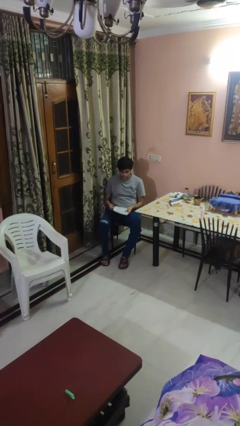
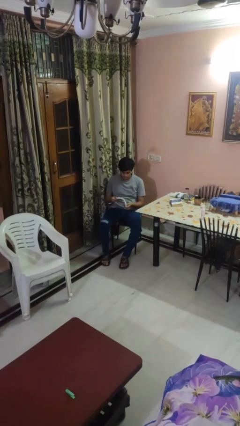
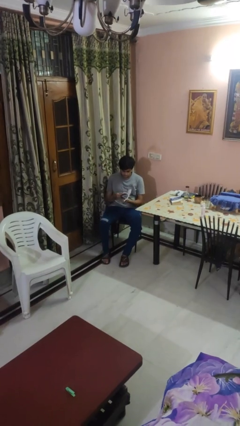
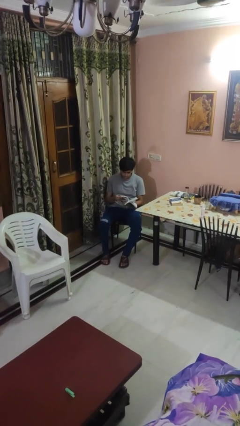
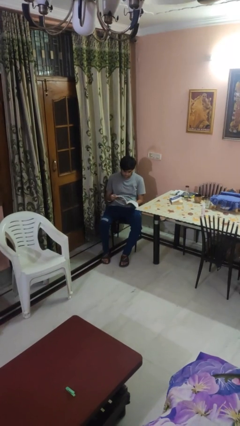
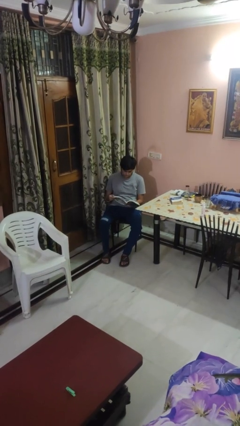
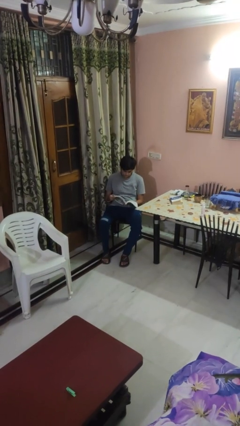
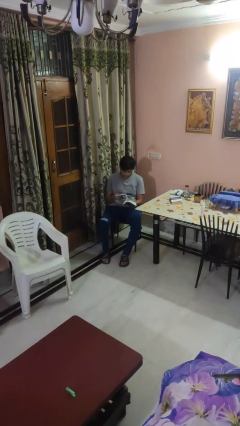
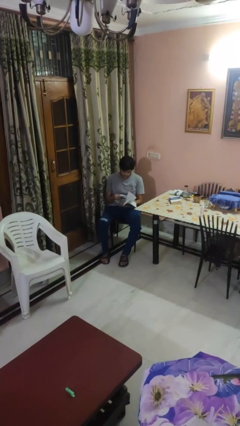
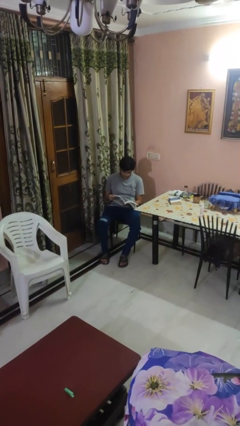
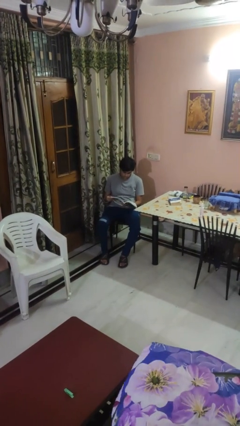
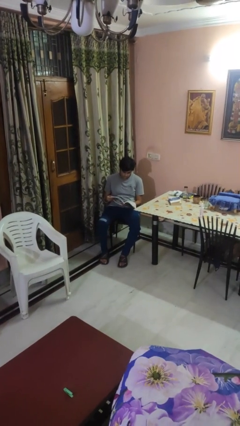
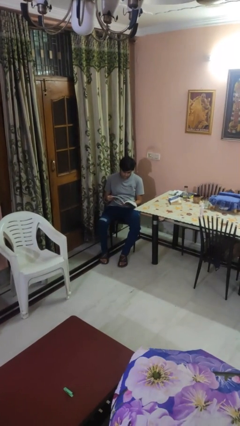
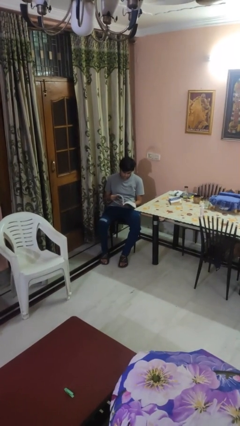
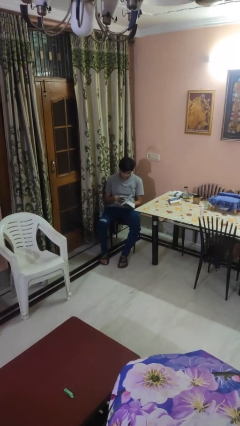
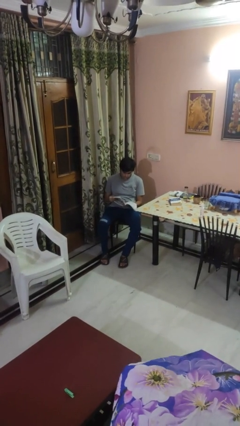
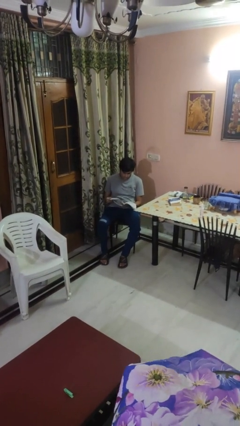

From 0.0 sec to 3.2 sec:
person reads magazine

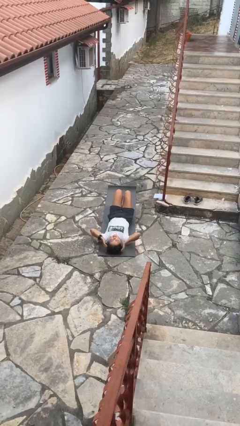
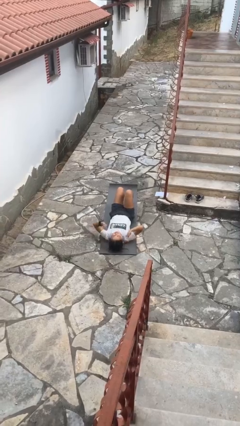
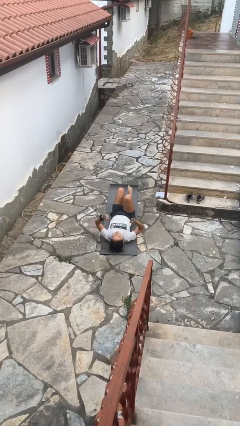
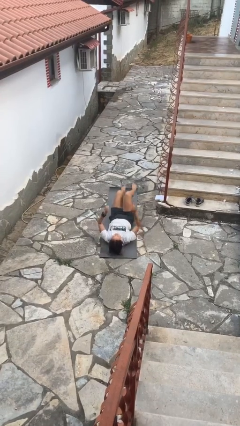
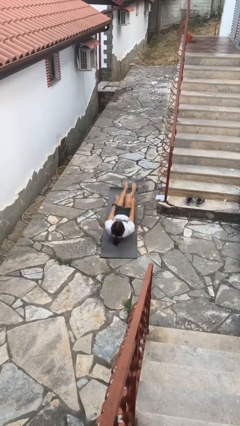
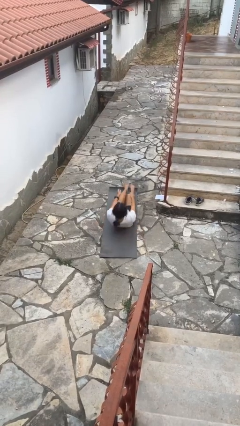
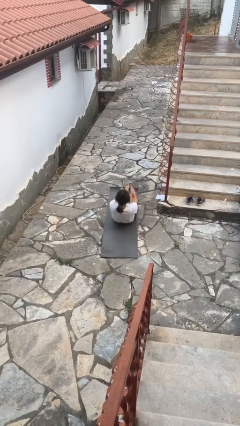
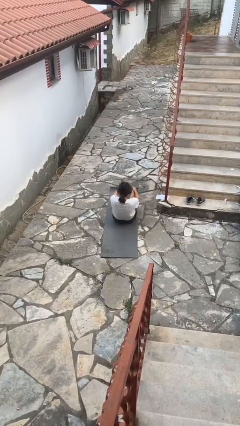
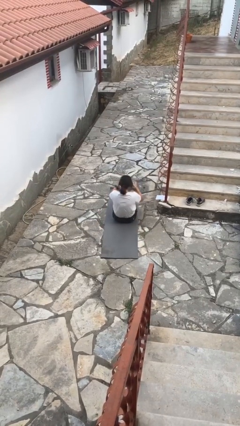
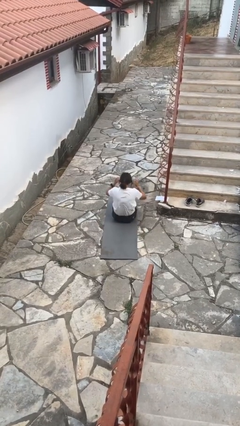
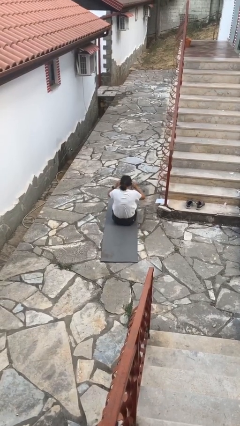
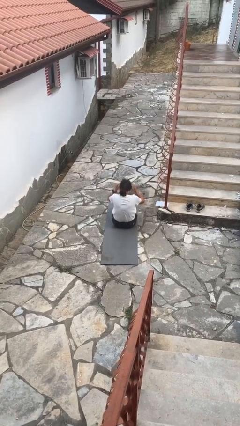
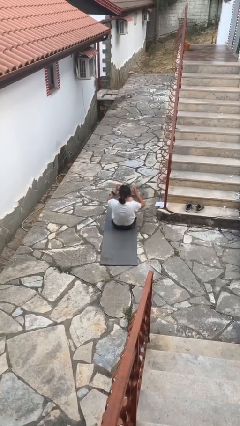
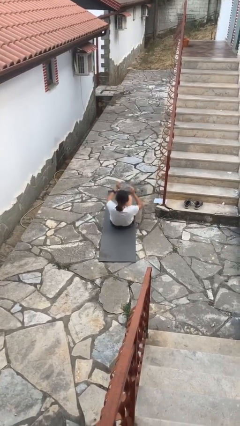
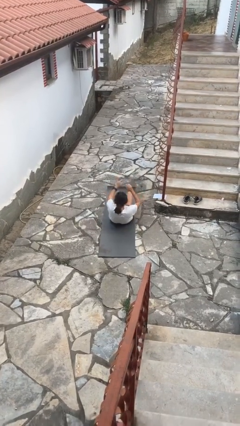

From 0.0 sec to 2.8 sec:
person exercises with situp

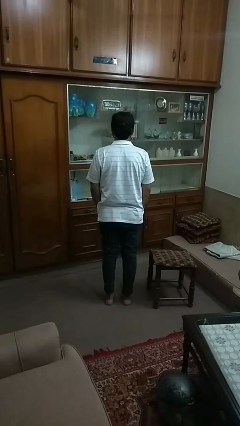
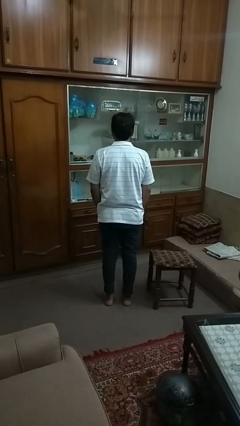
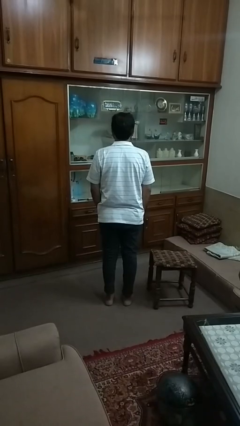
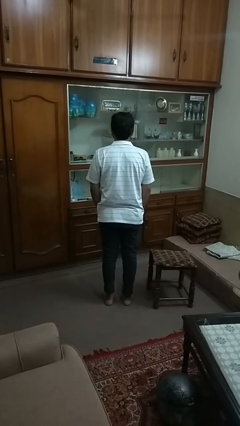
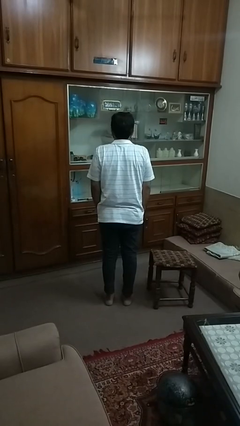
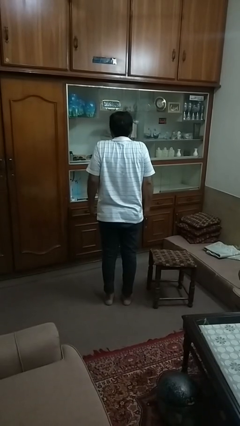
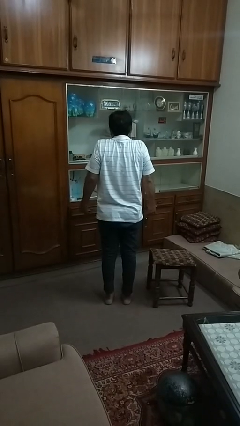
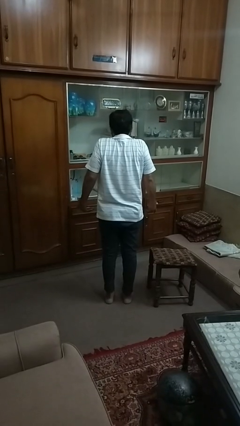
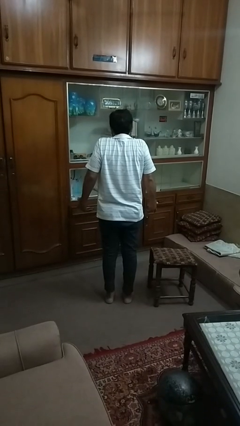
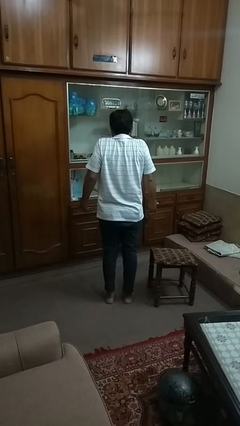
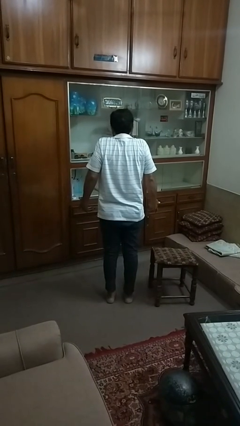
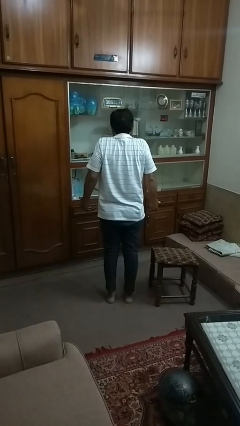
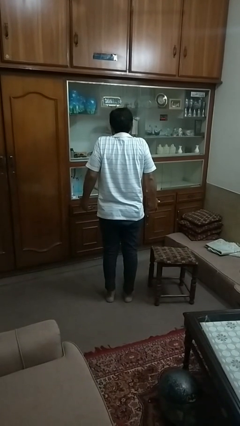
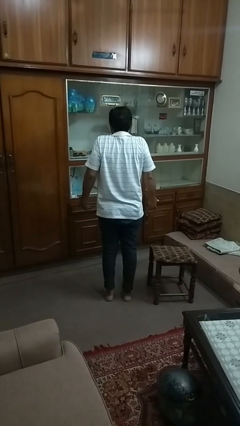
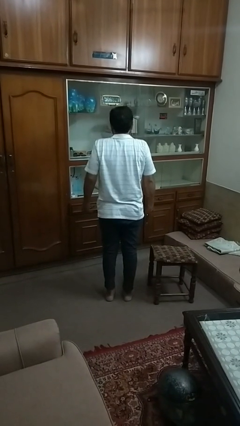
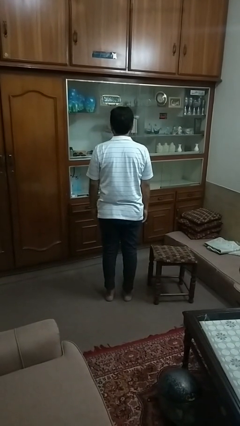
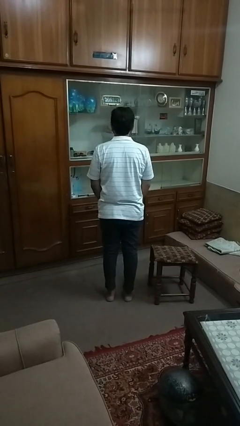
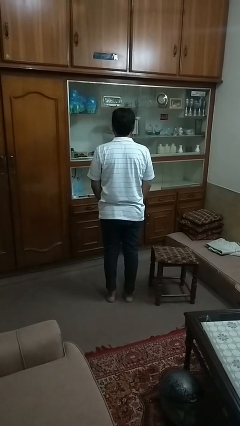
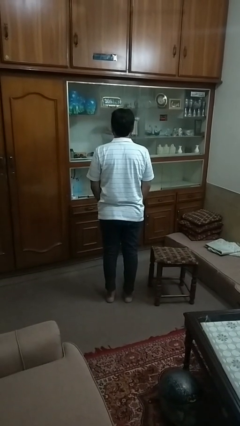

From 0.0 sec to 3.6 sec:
person shrugs

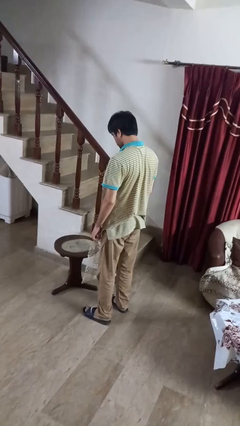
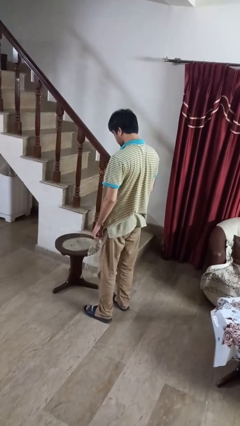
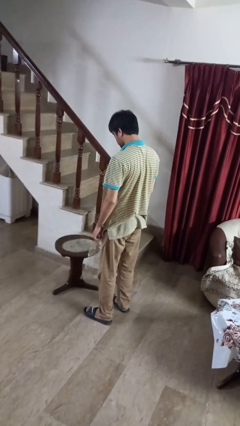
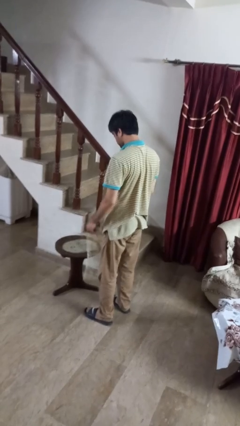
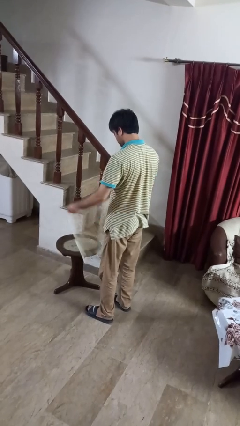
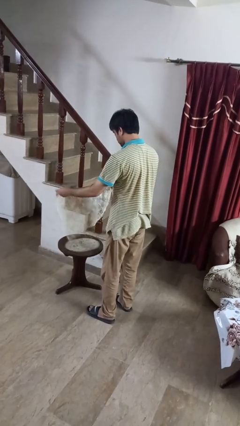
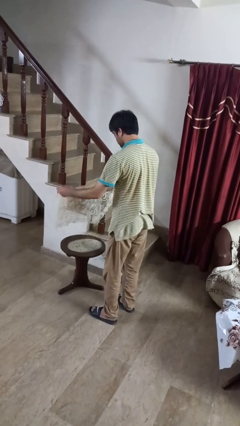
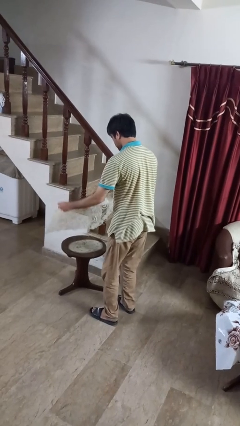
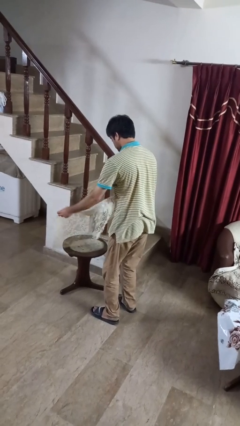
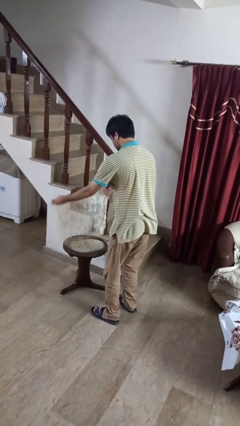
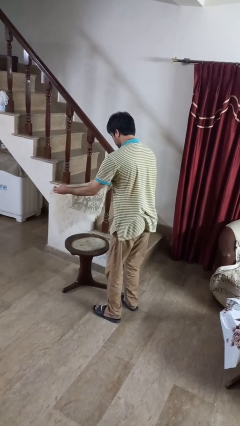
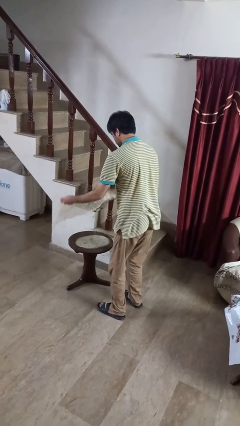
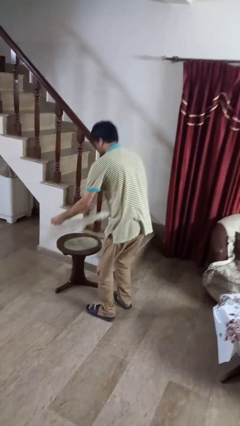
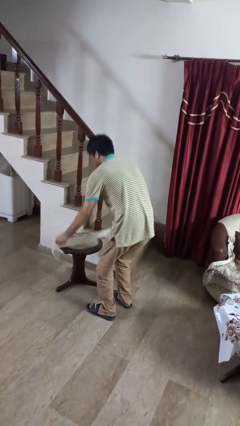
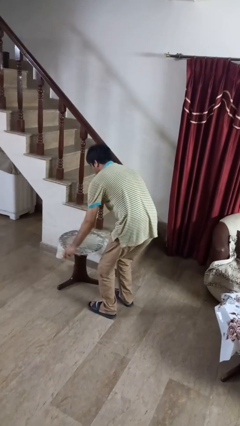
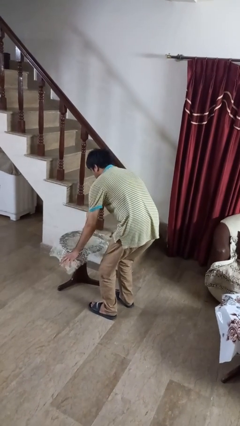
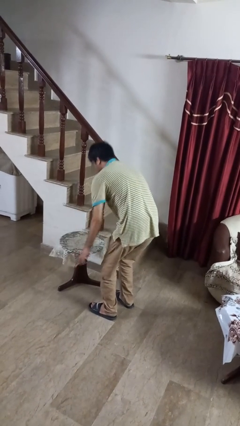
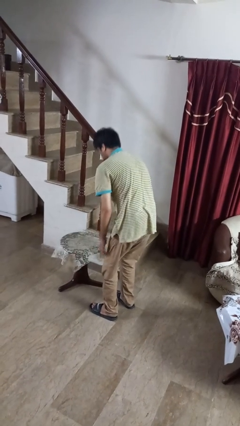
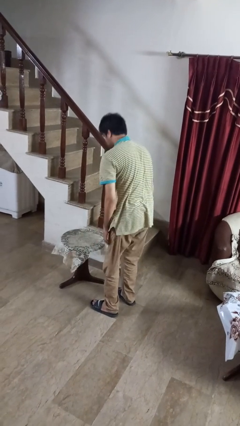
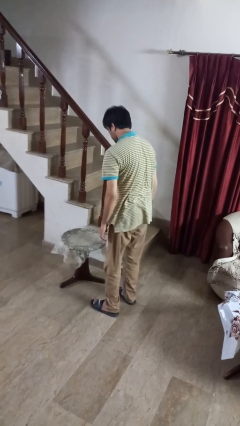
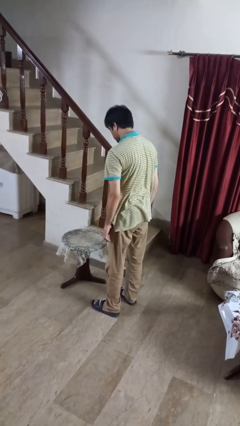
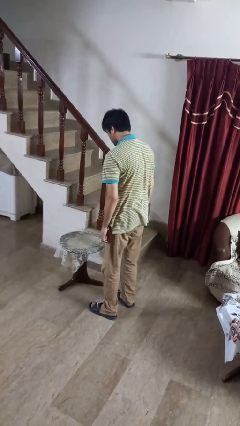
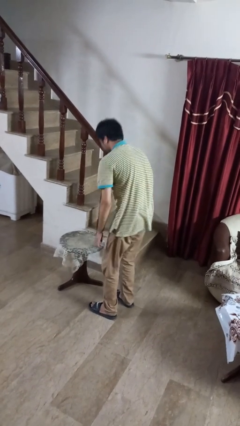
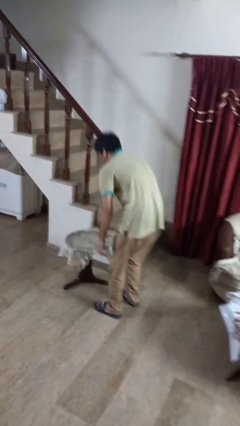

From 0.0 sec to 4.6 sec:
person spreads tablecloth

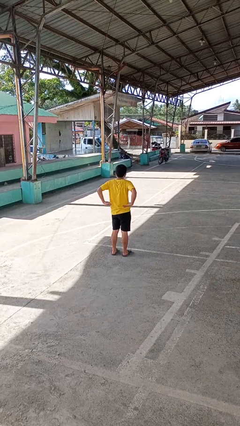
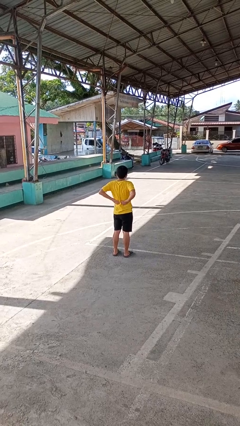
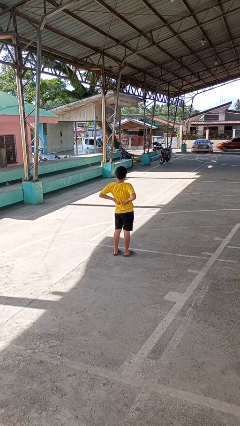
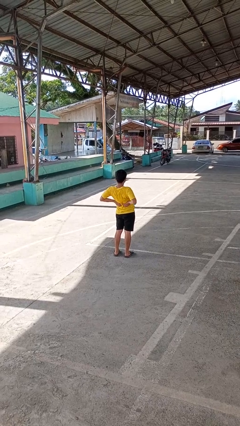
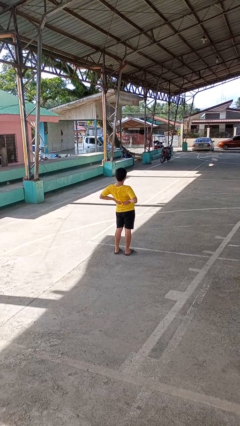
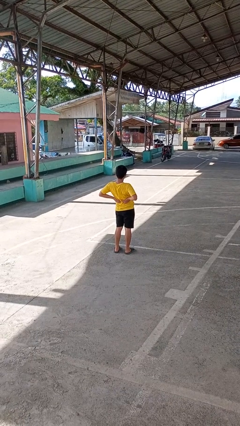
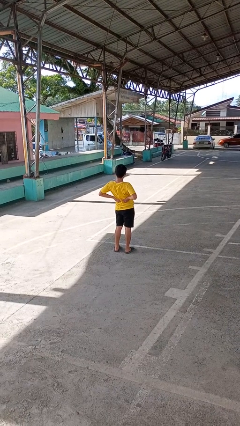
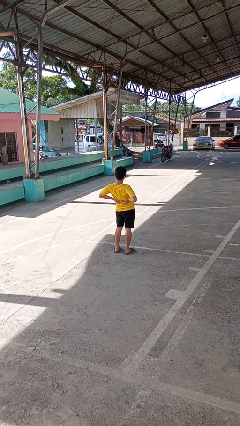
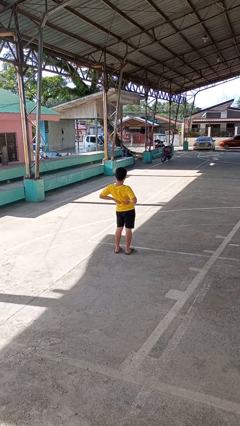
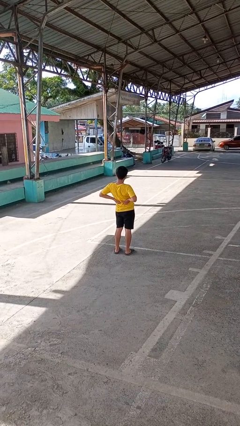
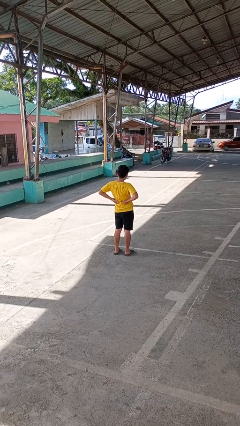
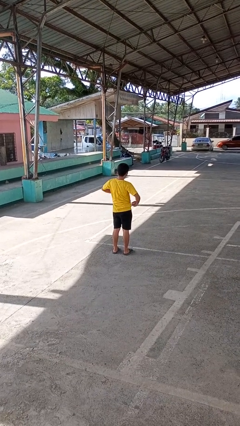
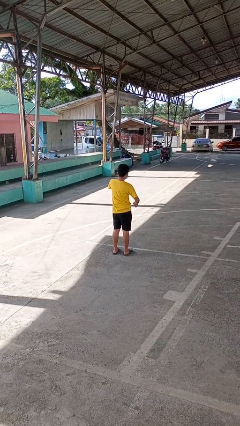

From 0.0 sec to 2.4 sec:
person stretches back

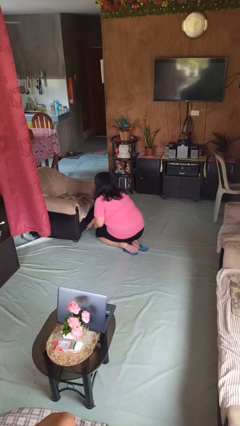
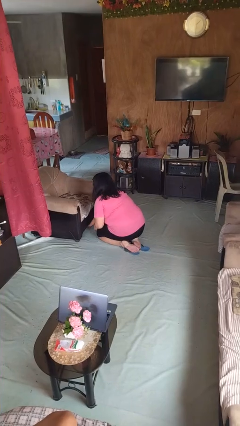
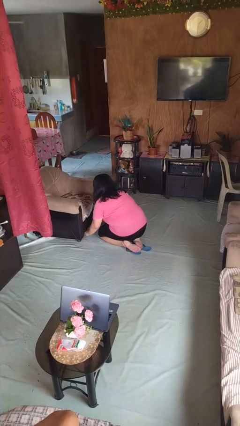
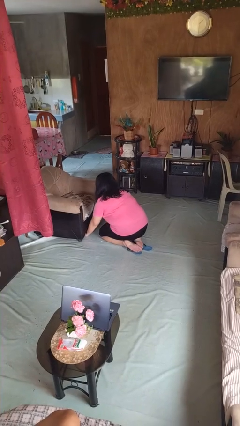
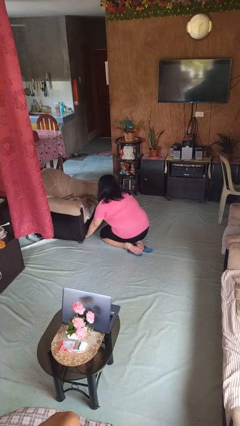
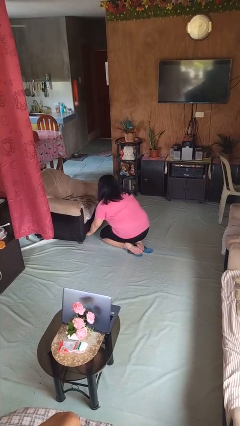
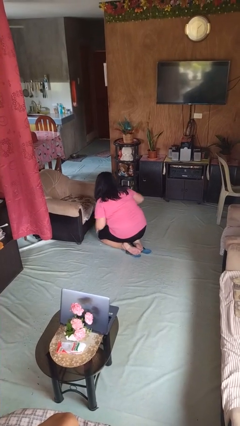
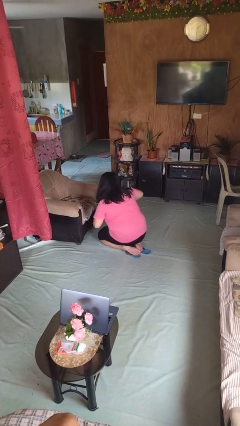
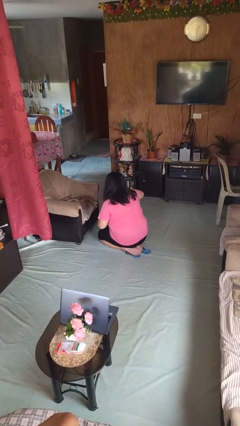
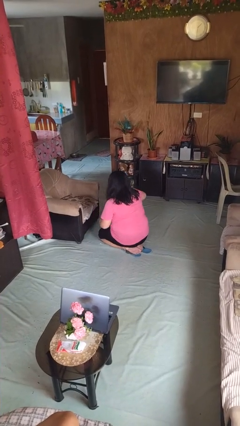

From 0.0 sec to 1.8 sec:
person searches under couch
